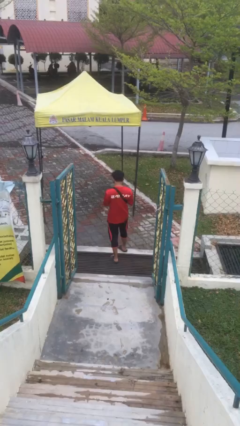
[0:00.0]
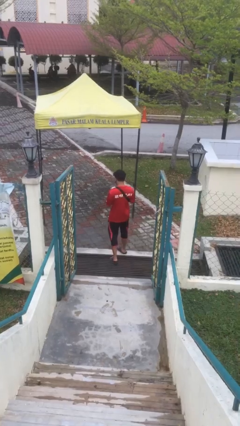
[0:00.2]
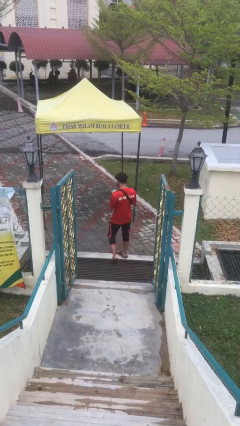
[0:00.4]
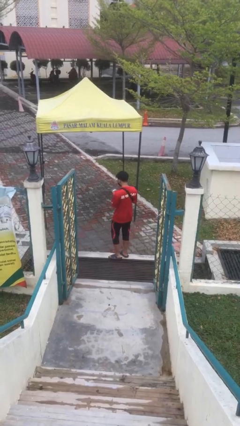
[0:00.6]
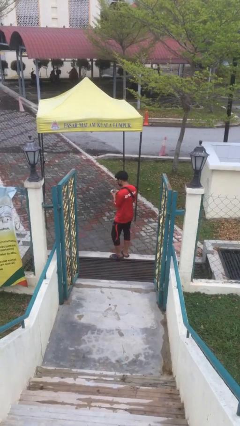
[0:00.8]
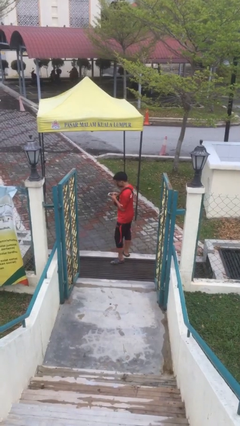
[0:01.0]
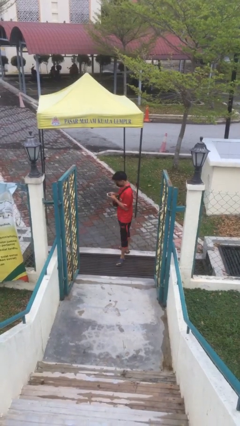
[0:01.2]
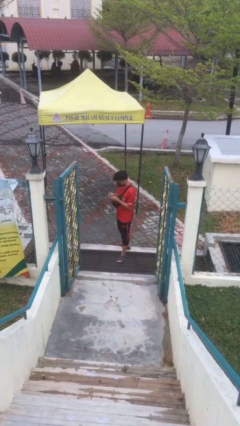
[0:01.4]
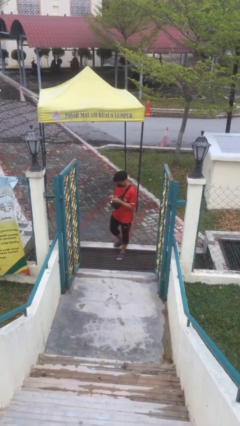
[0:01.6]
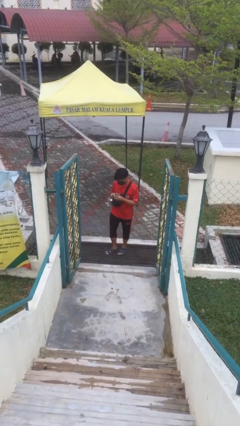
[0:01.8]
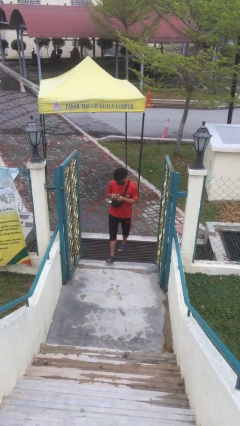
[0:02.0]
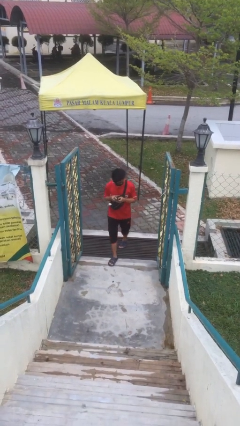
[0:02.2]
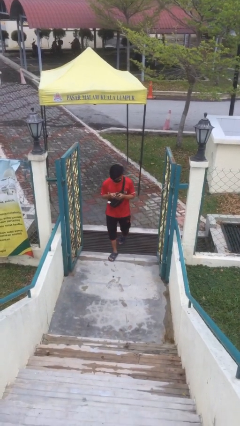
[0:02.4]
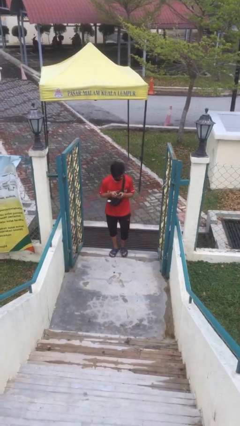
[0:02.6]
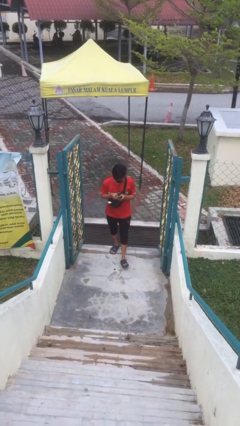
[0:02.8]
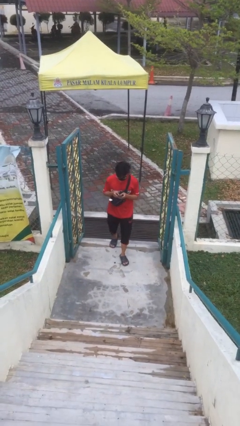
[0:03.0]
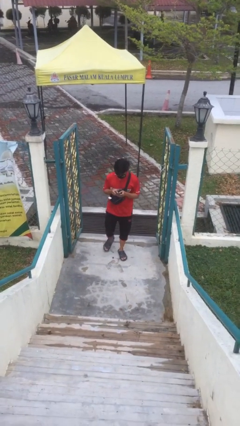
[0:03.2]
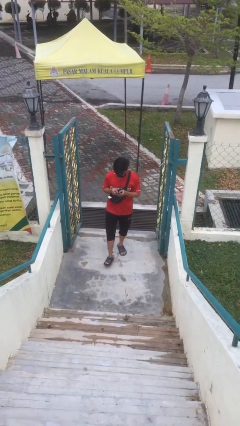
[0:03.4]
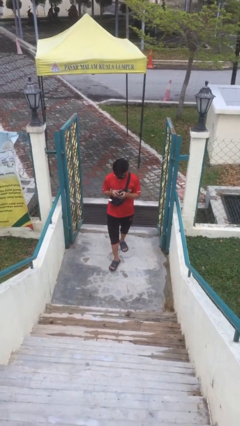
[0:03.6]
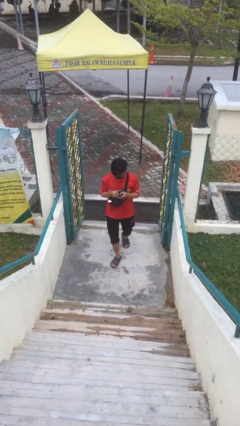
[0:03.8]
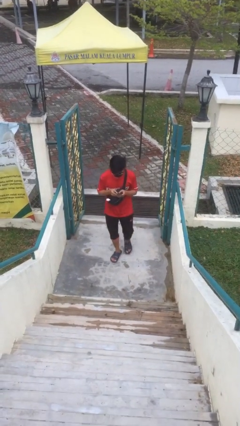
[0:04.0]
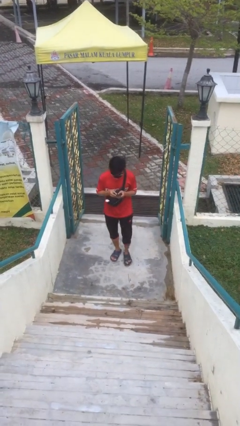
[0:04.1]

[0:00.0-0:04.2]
person enters scene through structure

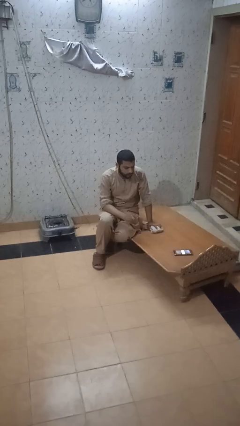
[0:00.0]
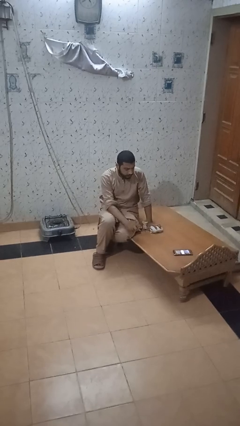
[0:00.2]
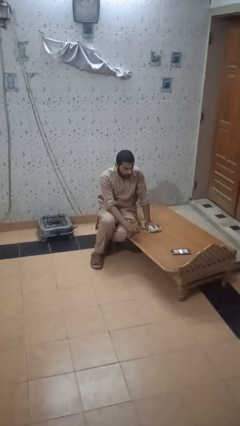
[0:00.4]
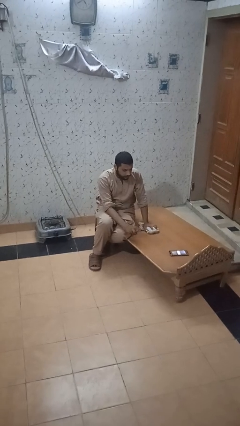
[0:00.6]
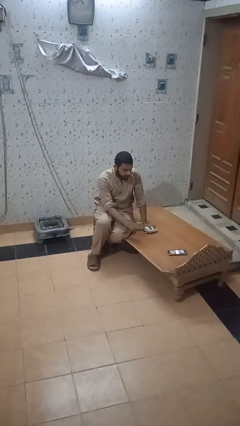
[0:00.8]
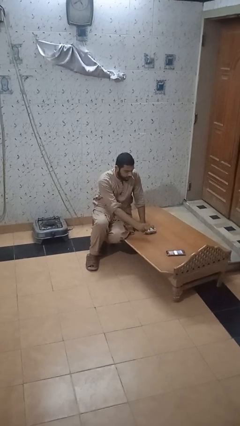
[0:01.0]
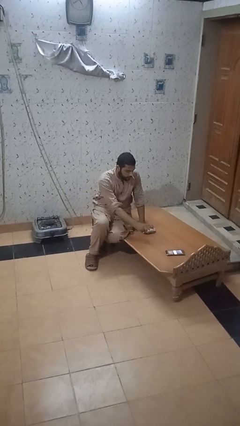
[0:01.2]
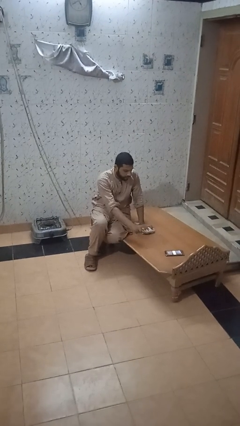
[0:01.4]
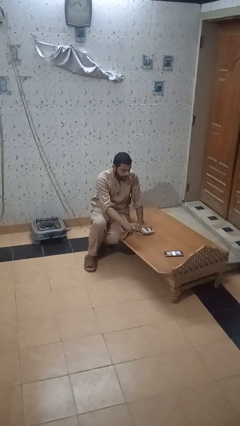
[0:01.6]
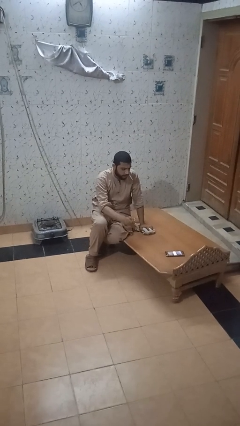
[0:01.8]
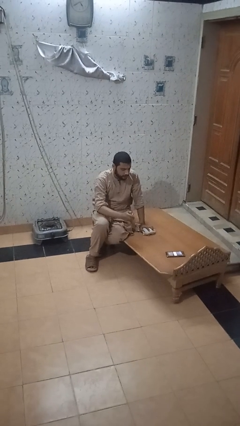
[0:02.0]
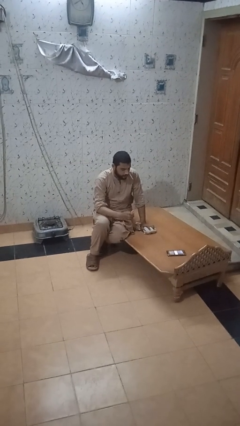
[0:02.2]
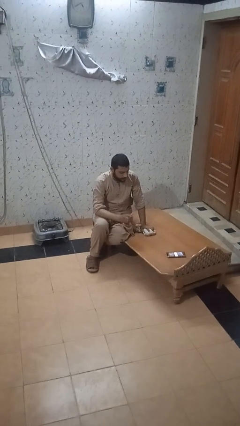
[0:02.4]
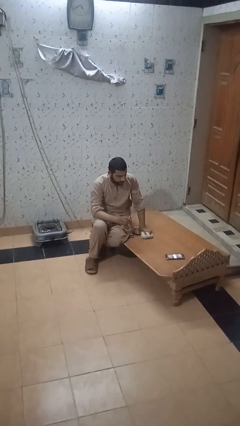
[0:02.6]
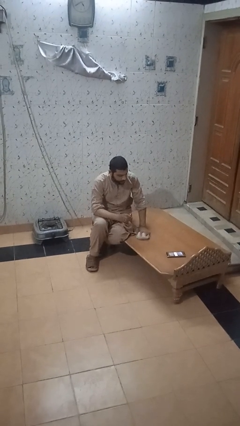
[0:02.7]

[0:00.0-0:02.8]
person sprays from bottle

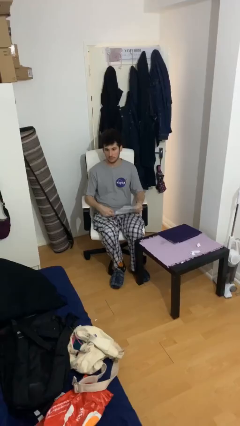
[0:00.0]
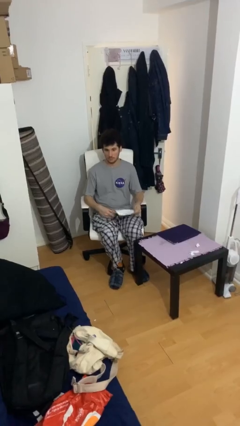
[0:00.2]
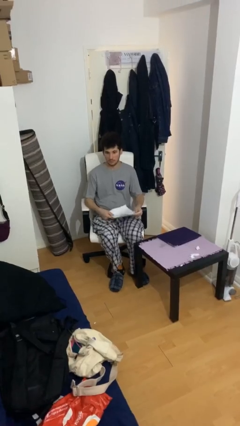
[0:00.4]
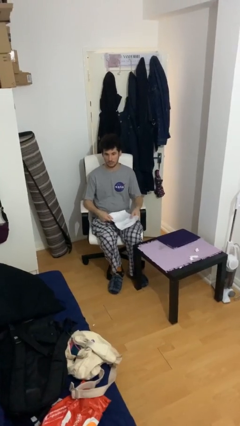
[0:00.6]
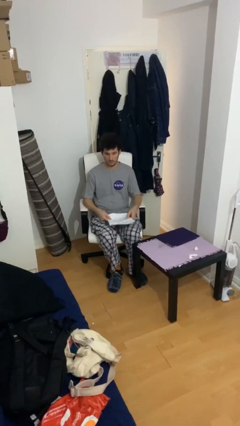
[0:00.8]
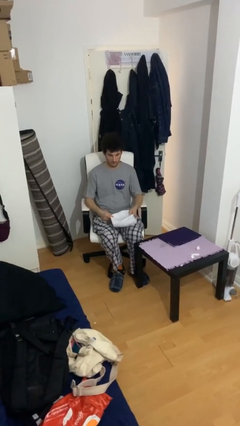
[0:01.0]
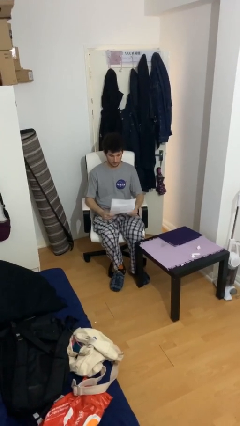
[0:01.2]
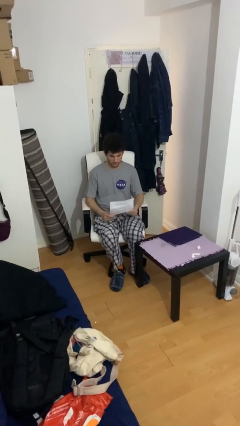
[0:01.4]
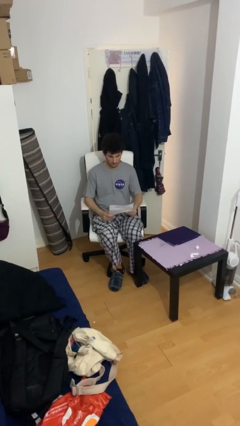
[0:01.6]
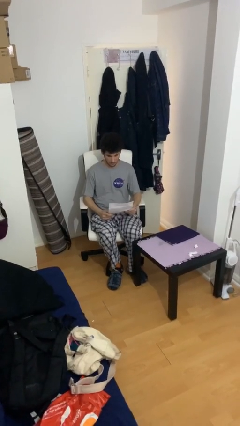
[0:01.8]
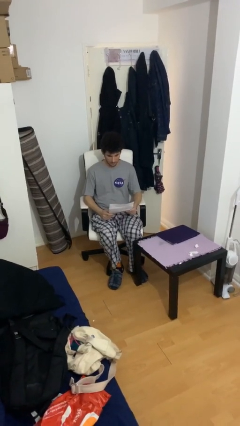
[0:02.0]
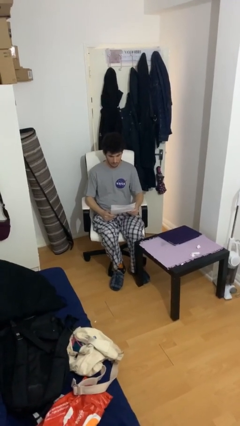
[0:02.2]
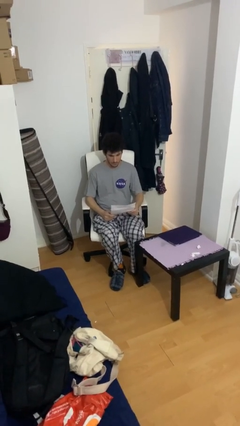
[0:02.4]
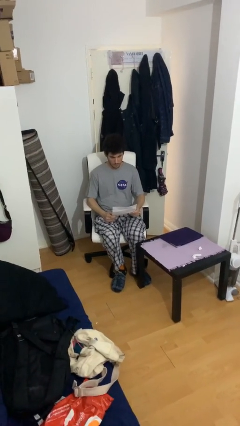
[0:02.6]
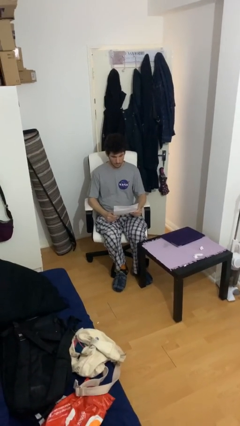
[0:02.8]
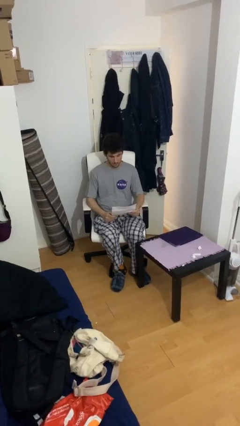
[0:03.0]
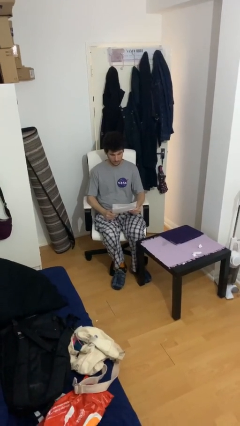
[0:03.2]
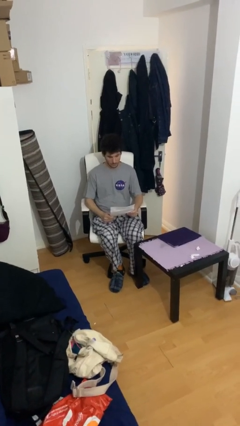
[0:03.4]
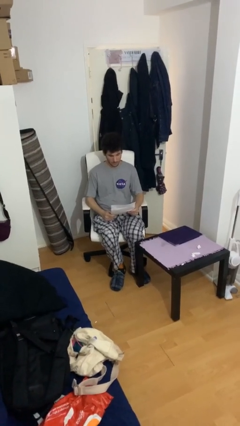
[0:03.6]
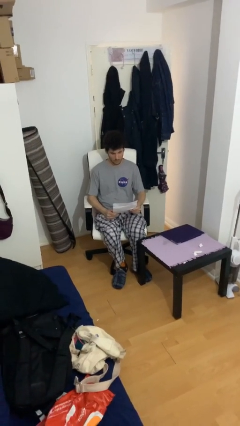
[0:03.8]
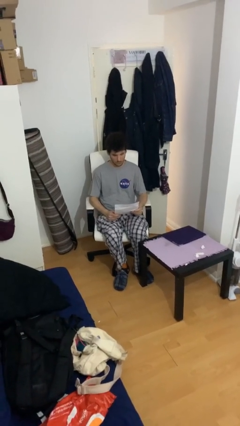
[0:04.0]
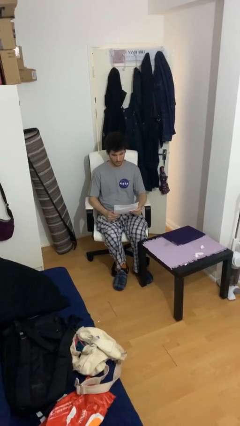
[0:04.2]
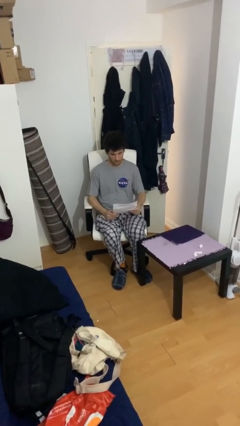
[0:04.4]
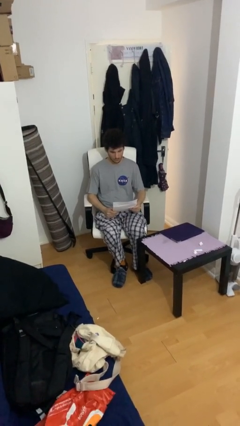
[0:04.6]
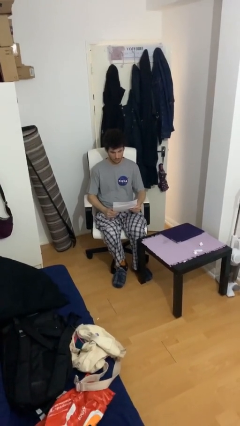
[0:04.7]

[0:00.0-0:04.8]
person reads document

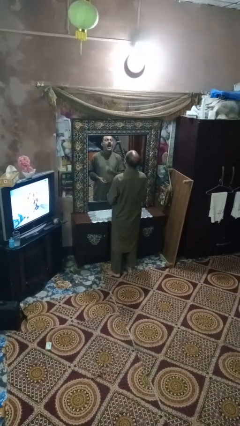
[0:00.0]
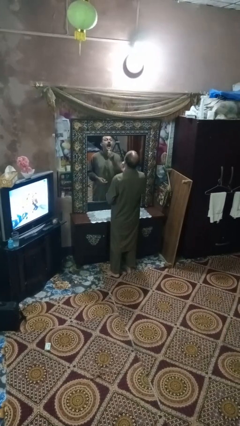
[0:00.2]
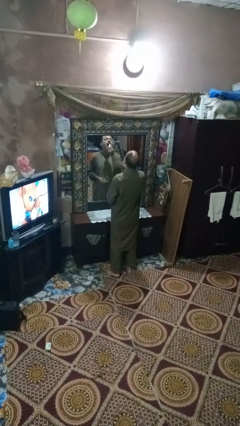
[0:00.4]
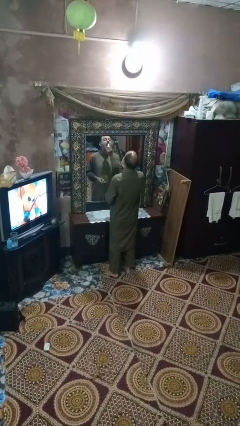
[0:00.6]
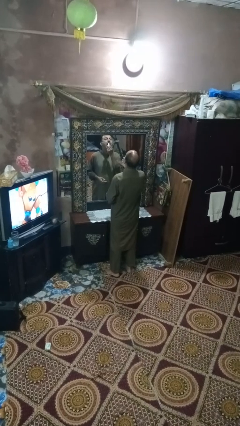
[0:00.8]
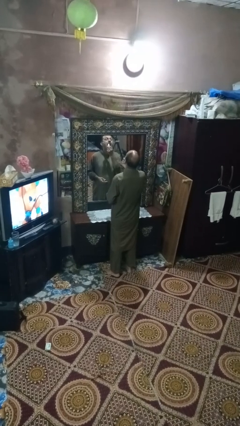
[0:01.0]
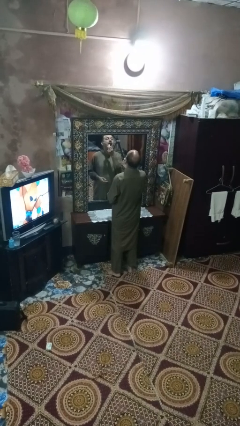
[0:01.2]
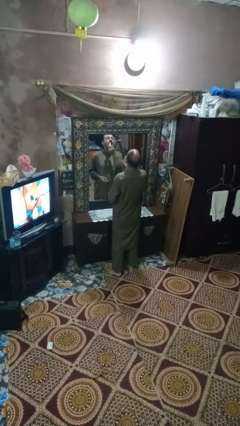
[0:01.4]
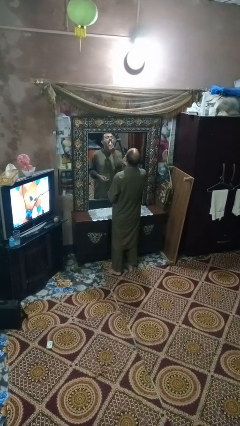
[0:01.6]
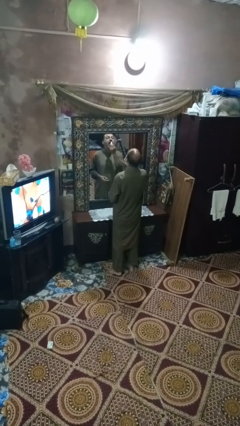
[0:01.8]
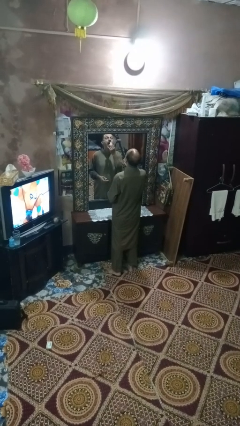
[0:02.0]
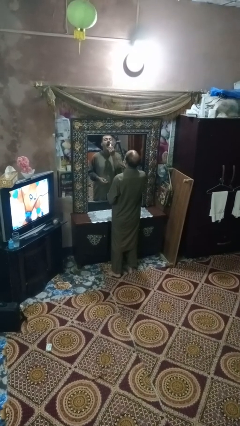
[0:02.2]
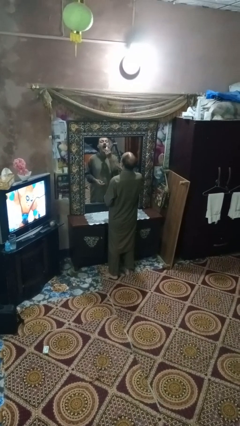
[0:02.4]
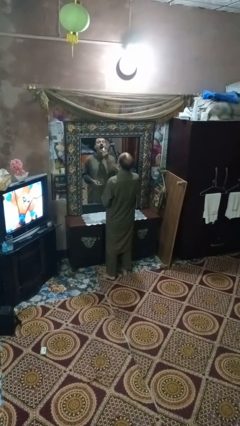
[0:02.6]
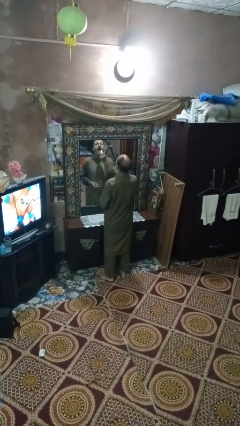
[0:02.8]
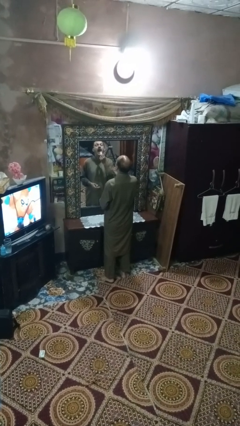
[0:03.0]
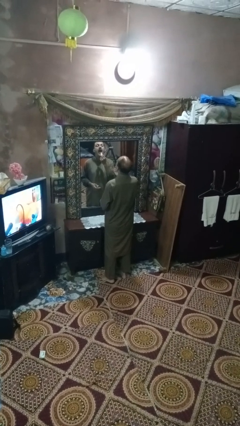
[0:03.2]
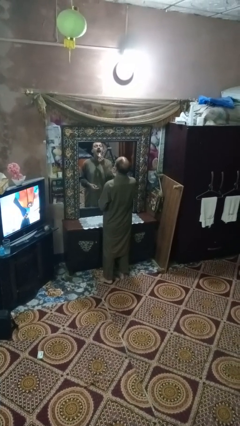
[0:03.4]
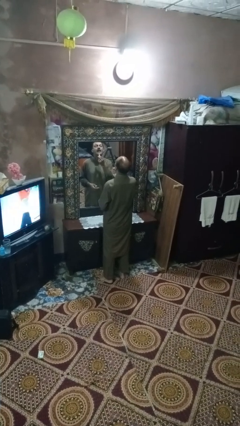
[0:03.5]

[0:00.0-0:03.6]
person applies lip makeup

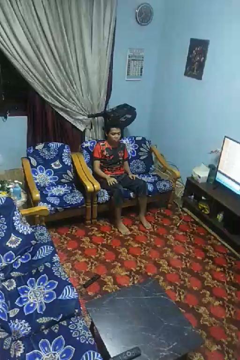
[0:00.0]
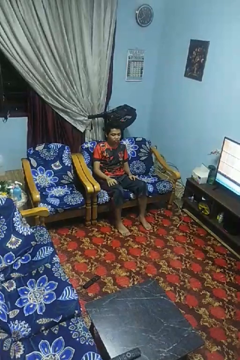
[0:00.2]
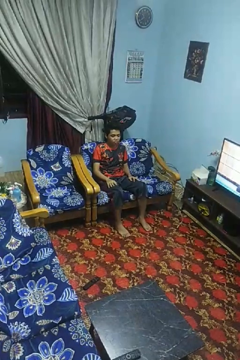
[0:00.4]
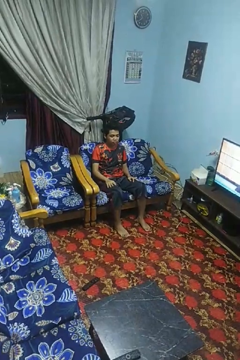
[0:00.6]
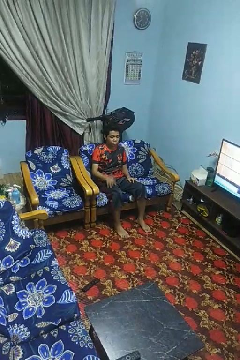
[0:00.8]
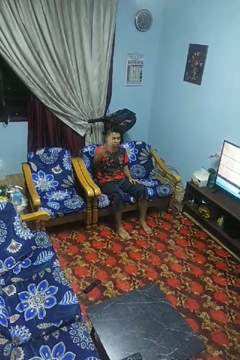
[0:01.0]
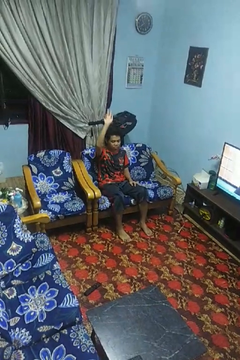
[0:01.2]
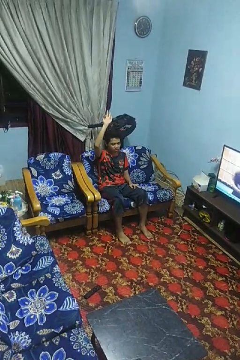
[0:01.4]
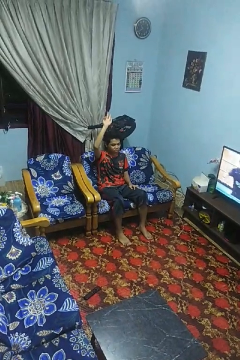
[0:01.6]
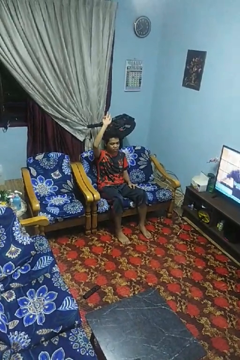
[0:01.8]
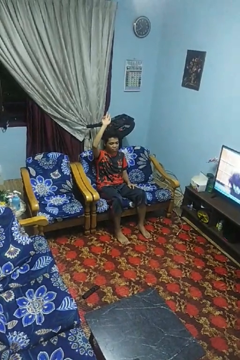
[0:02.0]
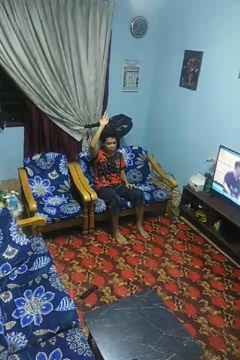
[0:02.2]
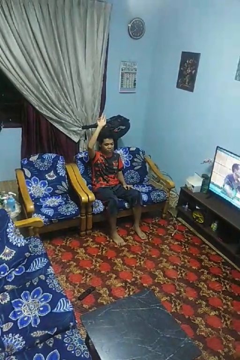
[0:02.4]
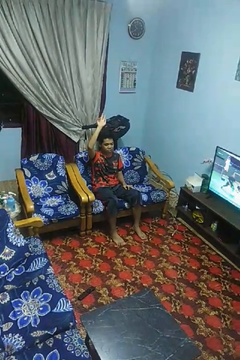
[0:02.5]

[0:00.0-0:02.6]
person gestures raise hand
